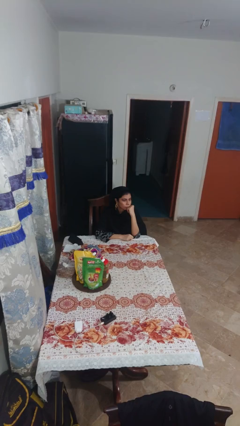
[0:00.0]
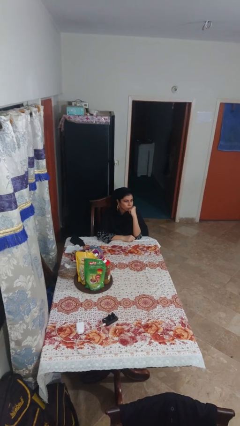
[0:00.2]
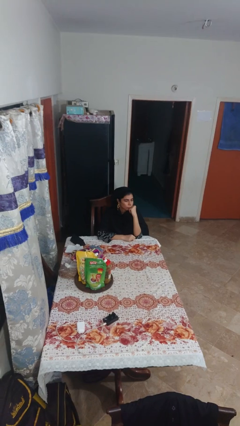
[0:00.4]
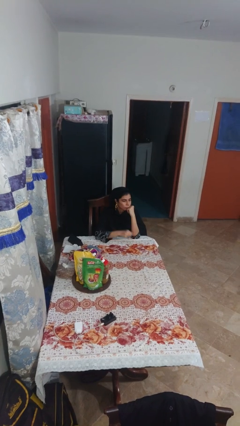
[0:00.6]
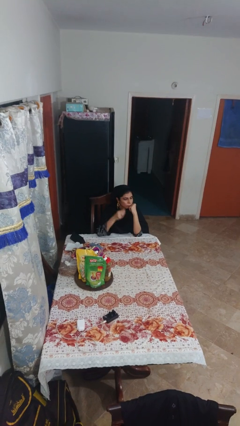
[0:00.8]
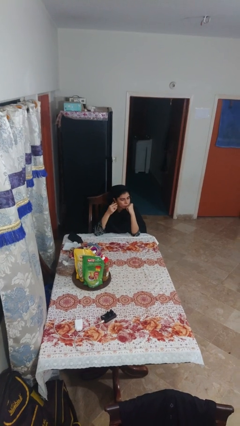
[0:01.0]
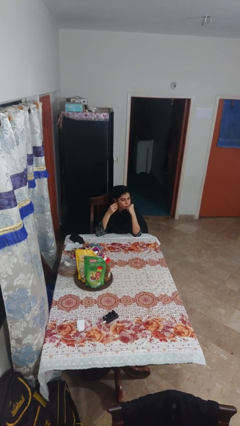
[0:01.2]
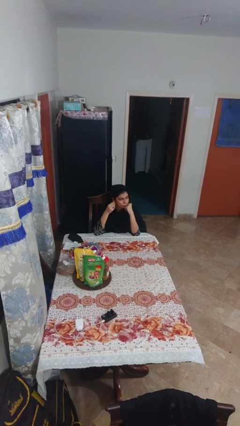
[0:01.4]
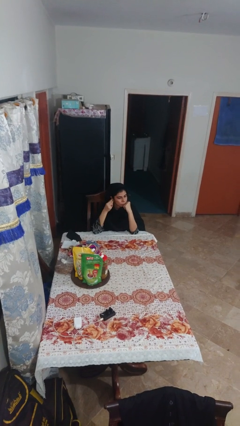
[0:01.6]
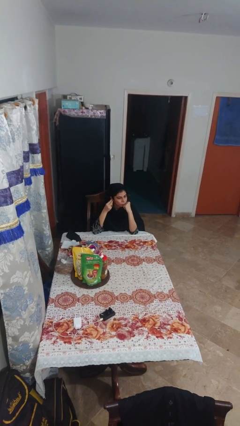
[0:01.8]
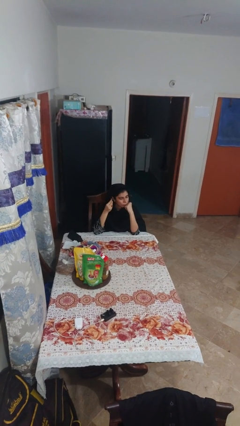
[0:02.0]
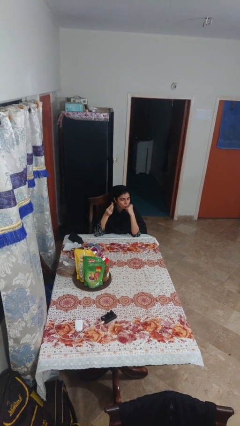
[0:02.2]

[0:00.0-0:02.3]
person takes off earrings

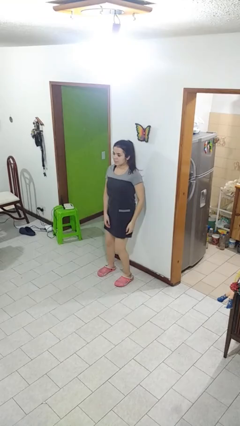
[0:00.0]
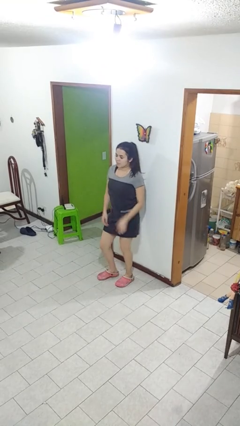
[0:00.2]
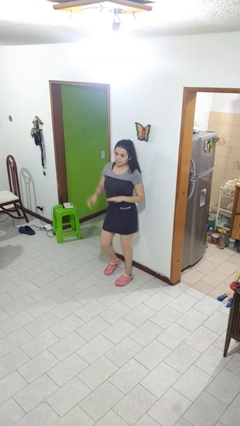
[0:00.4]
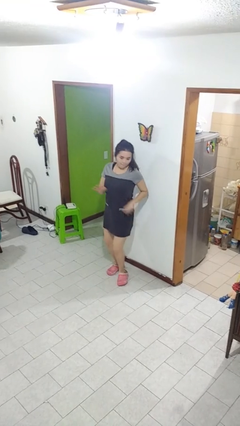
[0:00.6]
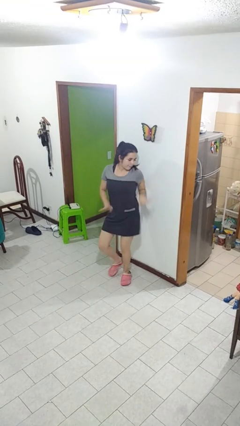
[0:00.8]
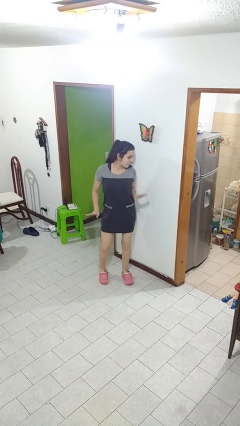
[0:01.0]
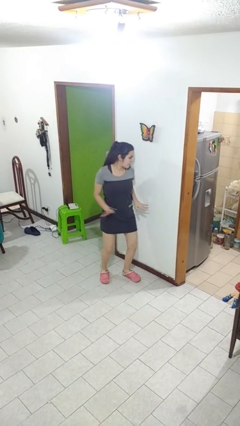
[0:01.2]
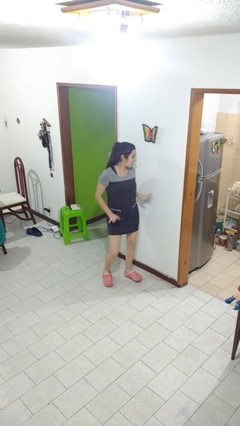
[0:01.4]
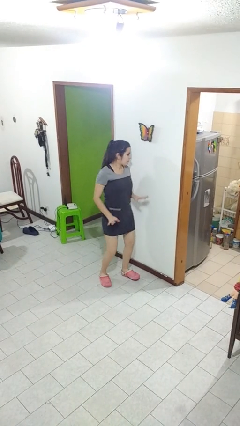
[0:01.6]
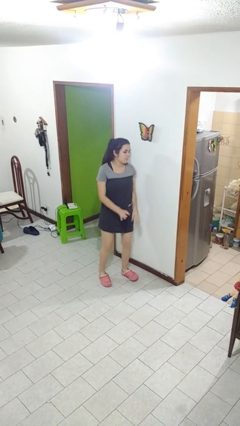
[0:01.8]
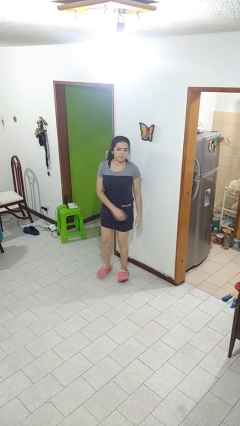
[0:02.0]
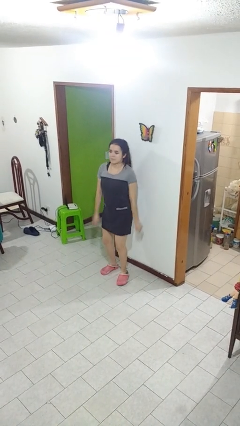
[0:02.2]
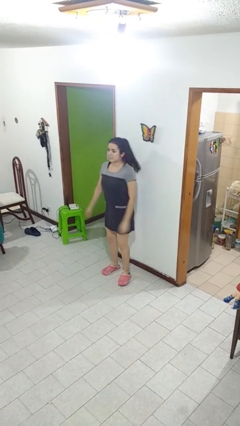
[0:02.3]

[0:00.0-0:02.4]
person dances in place

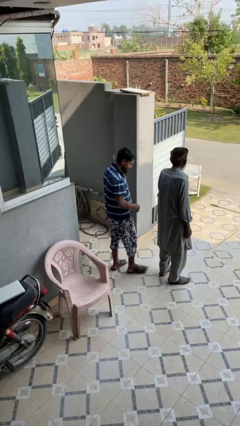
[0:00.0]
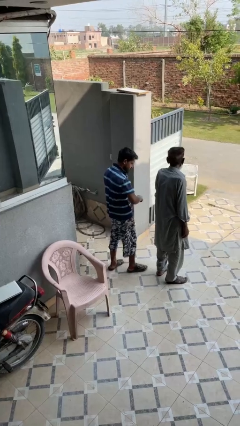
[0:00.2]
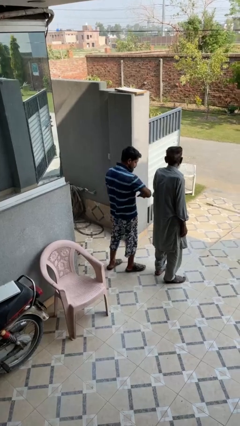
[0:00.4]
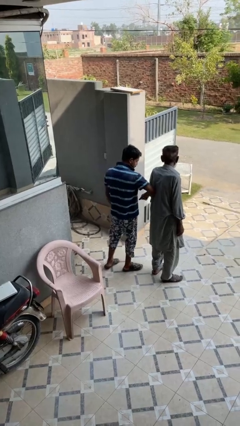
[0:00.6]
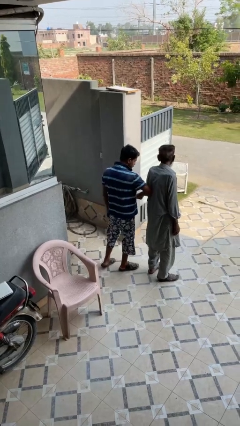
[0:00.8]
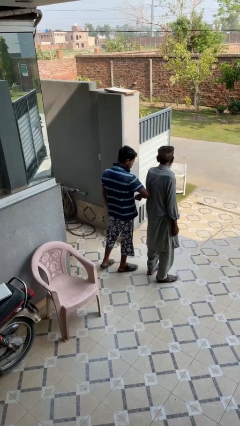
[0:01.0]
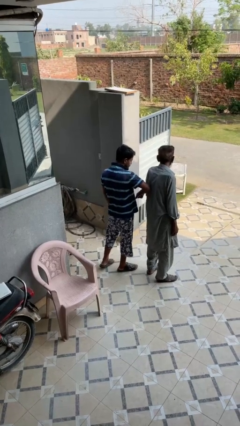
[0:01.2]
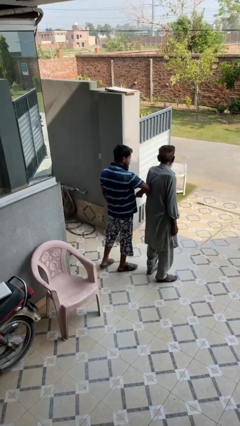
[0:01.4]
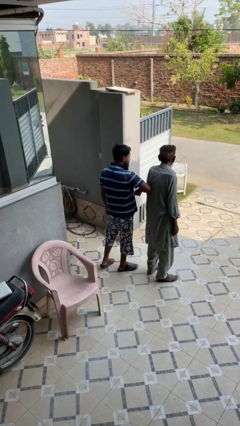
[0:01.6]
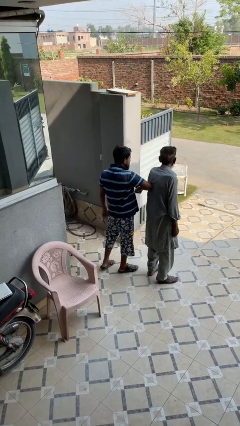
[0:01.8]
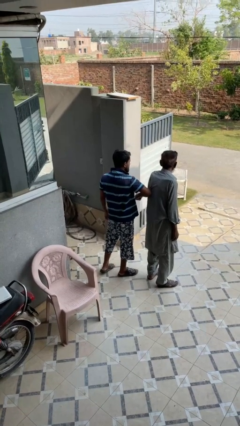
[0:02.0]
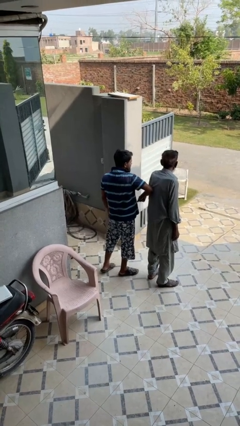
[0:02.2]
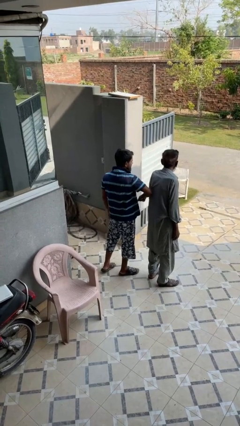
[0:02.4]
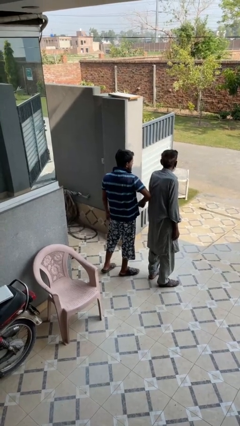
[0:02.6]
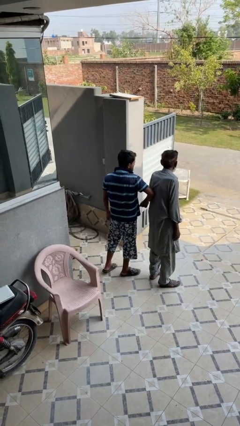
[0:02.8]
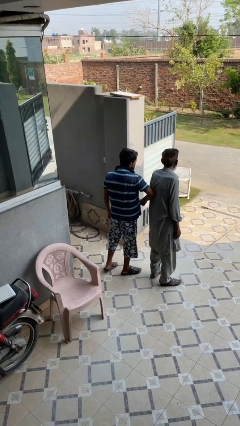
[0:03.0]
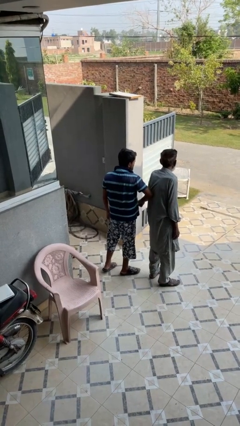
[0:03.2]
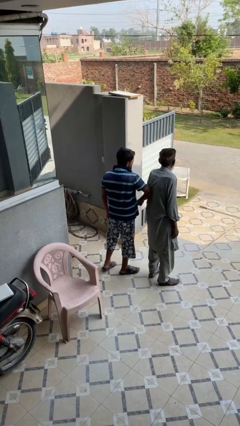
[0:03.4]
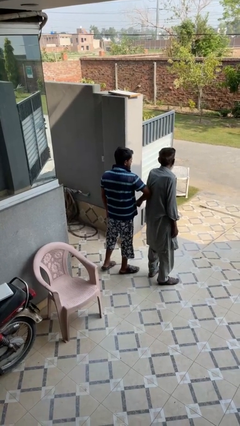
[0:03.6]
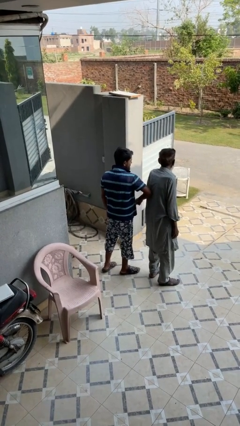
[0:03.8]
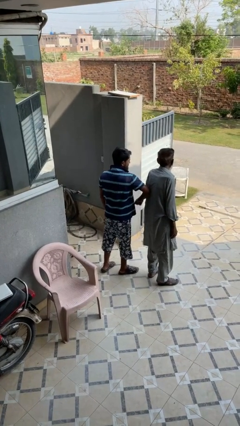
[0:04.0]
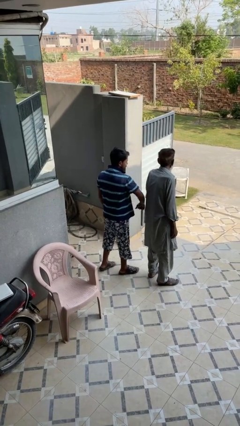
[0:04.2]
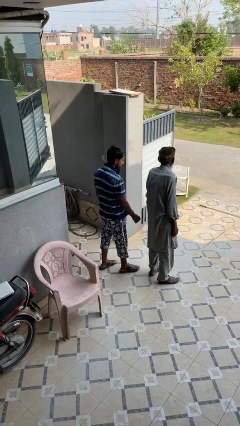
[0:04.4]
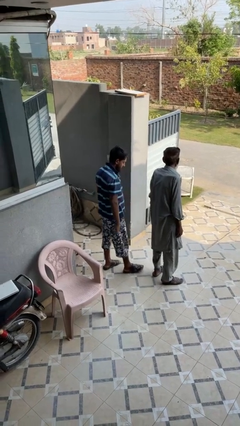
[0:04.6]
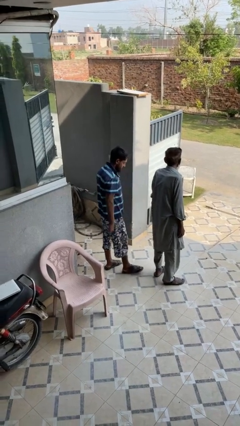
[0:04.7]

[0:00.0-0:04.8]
person nudges person with elbow

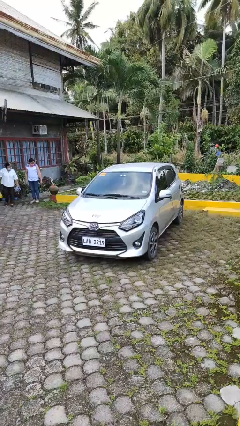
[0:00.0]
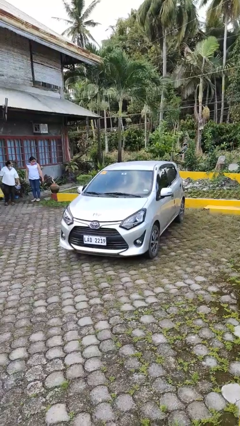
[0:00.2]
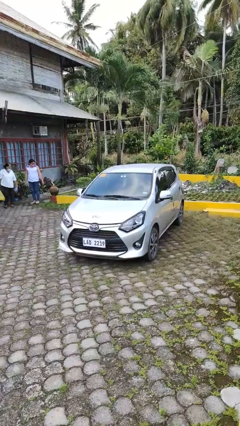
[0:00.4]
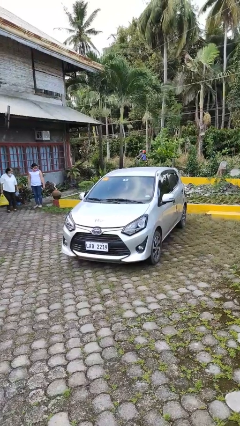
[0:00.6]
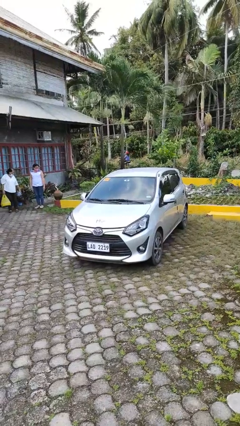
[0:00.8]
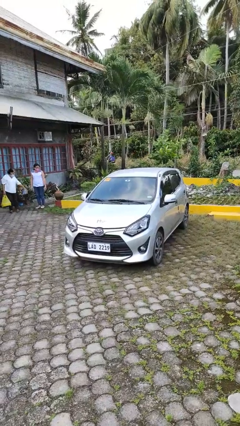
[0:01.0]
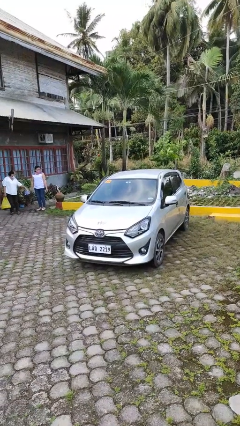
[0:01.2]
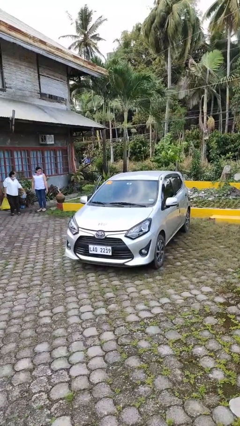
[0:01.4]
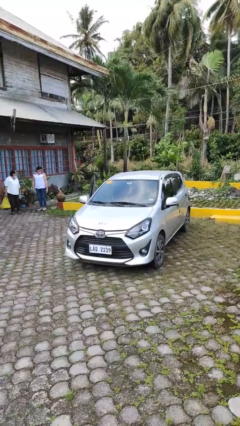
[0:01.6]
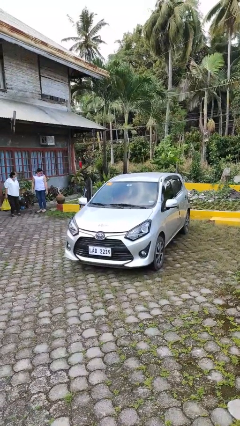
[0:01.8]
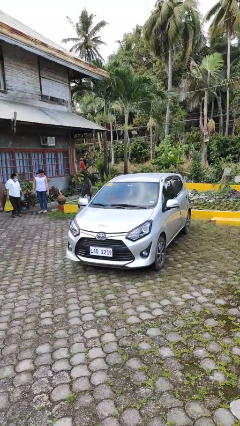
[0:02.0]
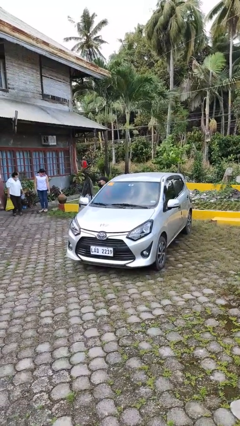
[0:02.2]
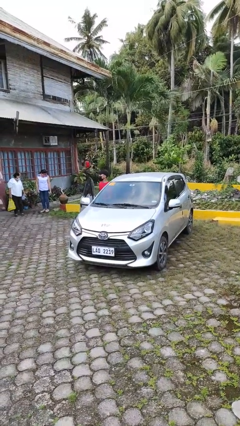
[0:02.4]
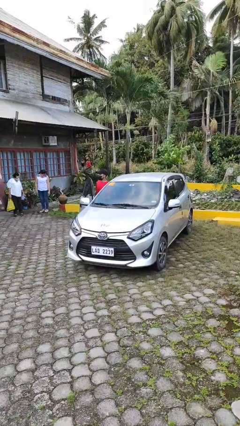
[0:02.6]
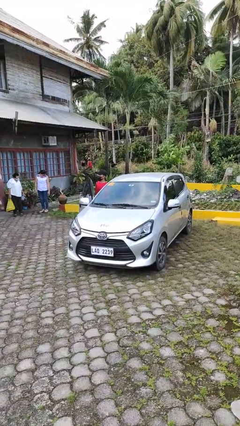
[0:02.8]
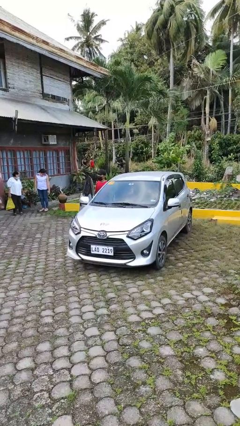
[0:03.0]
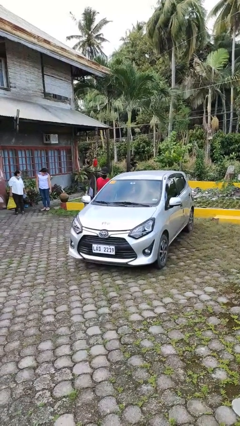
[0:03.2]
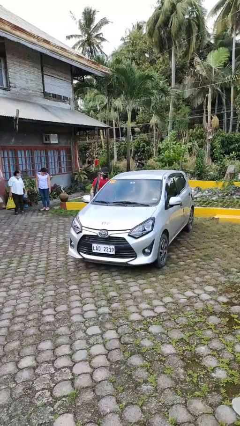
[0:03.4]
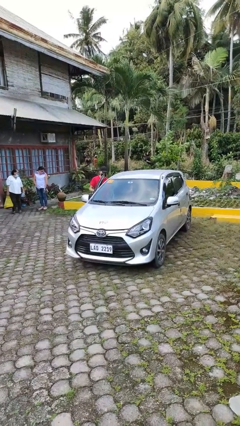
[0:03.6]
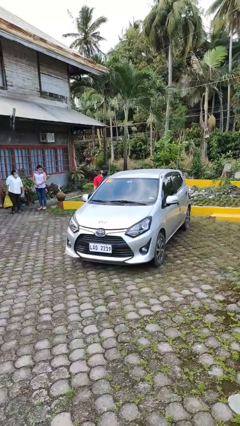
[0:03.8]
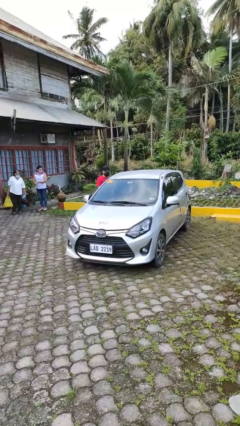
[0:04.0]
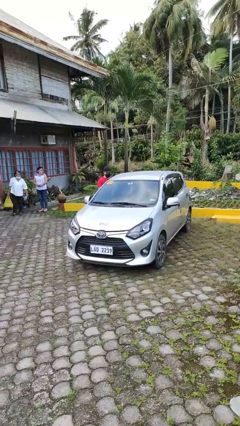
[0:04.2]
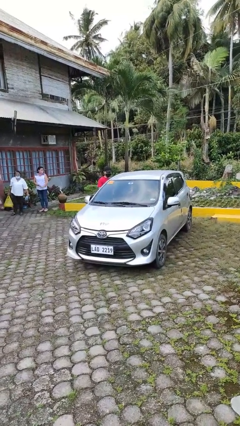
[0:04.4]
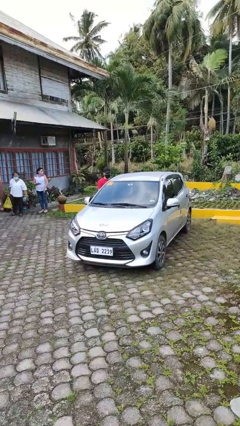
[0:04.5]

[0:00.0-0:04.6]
car drops off person

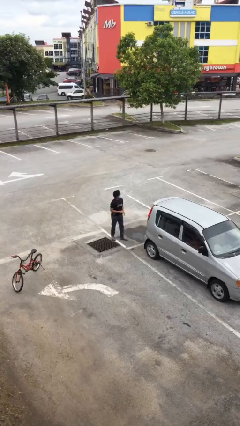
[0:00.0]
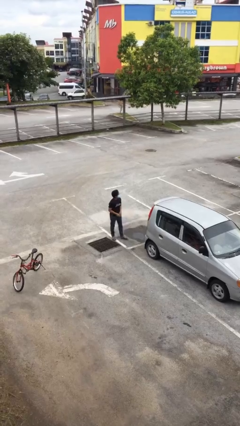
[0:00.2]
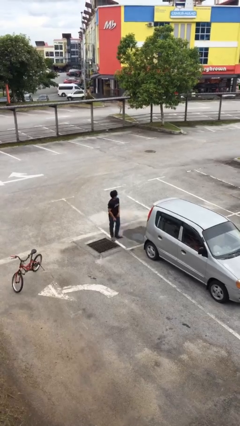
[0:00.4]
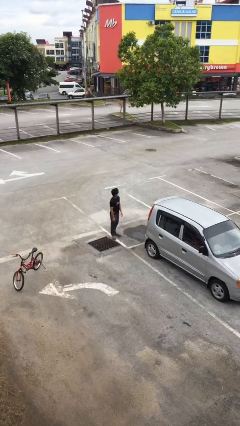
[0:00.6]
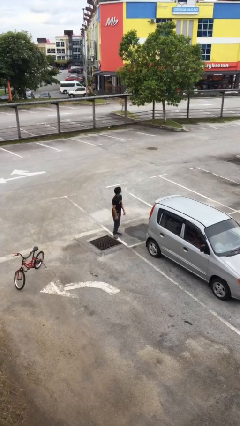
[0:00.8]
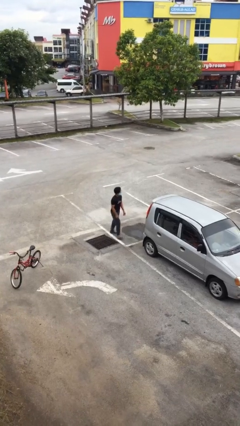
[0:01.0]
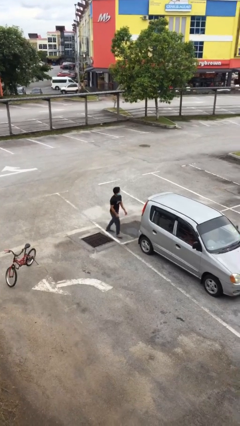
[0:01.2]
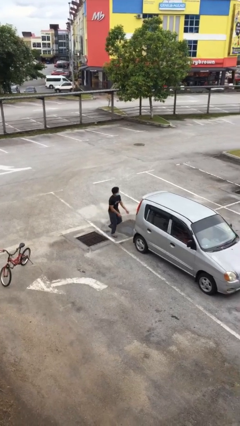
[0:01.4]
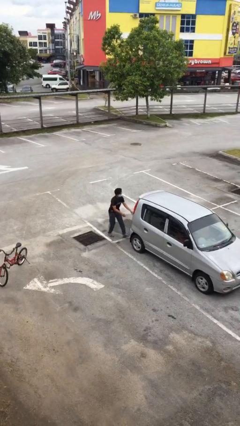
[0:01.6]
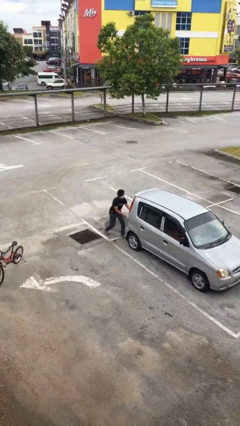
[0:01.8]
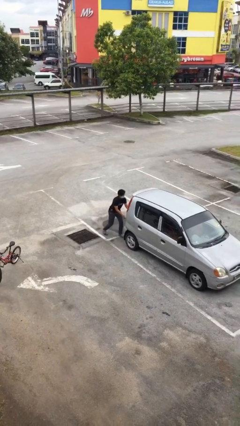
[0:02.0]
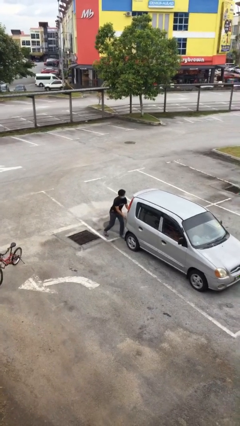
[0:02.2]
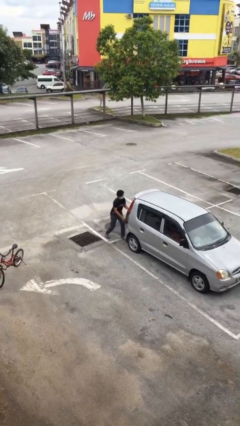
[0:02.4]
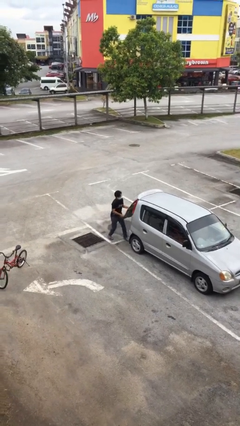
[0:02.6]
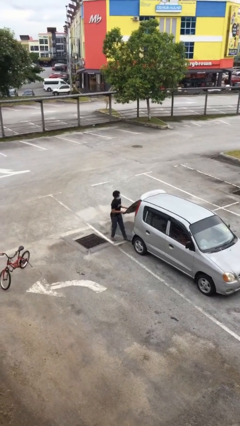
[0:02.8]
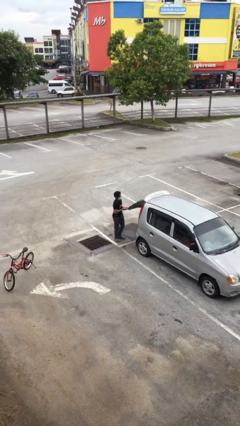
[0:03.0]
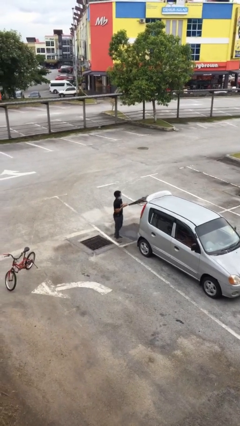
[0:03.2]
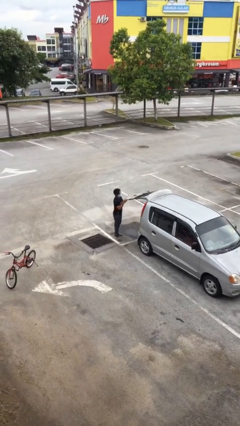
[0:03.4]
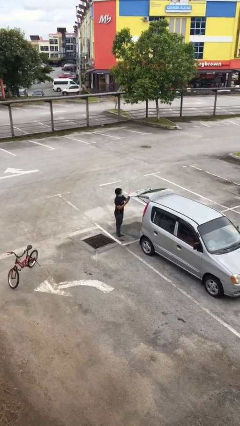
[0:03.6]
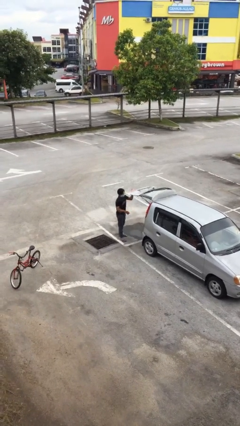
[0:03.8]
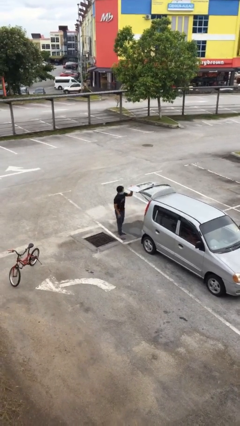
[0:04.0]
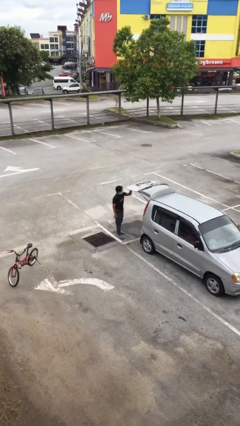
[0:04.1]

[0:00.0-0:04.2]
person opens car trunk
